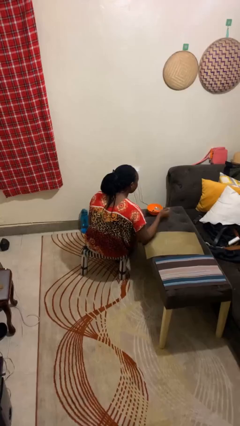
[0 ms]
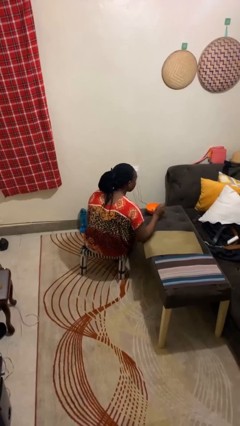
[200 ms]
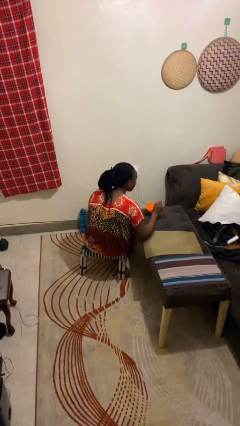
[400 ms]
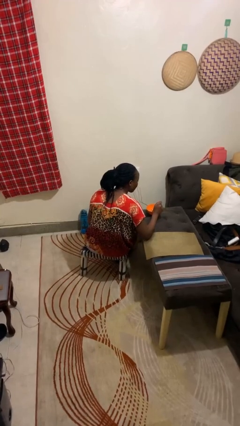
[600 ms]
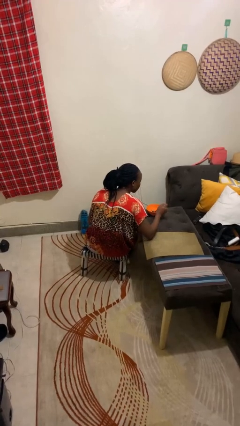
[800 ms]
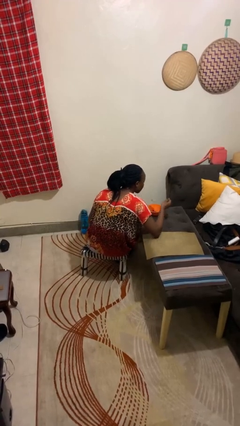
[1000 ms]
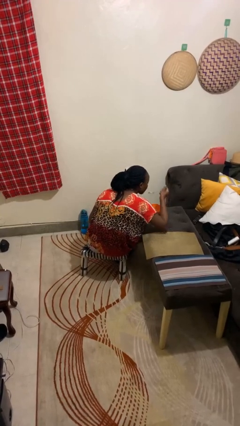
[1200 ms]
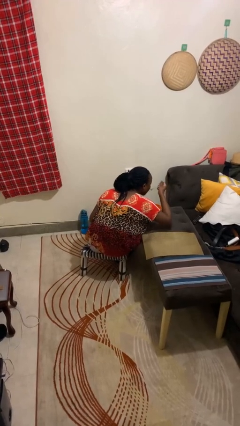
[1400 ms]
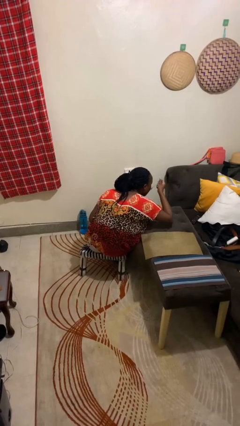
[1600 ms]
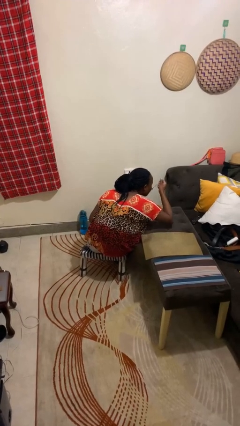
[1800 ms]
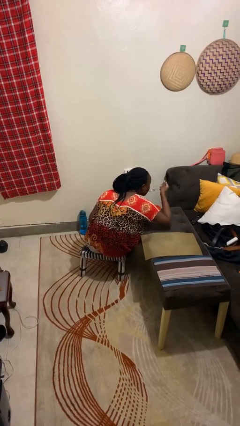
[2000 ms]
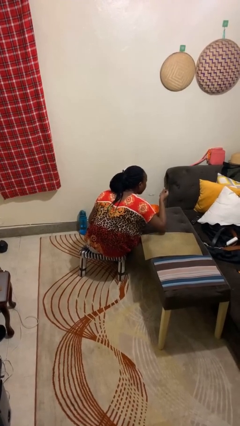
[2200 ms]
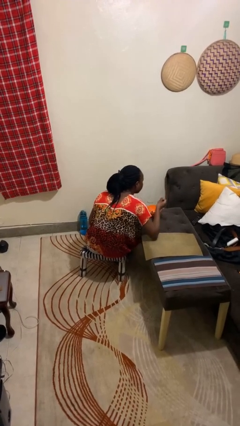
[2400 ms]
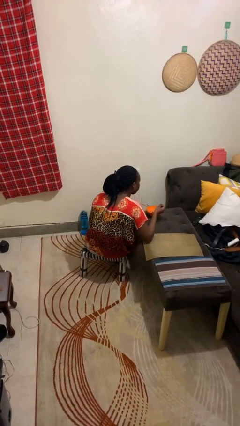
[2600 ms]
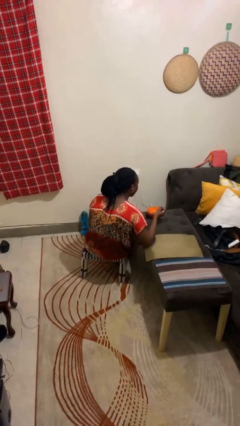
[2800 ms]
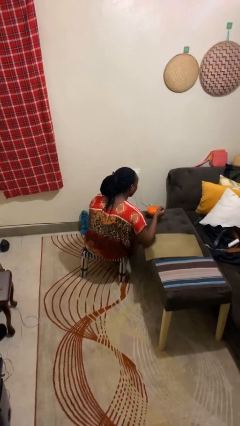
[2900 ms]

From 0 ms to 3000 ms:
person eats with utensil

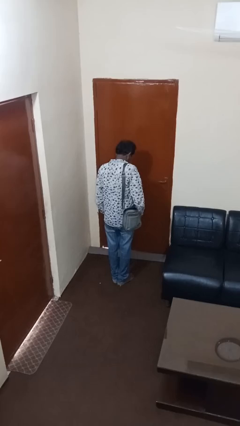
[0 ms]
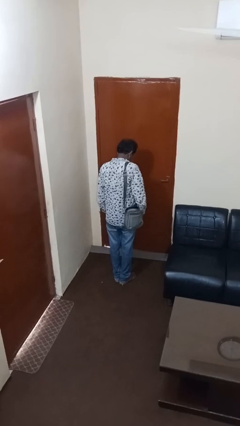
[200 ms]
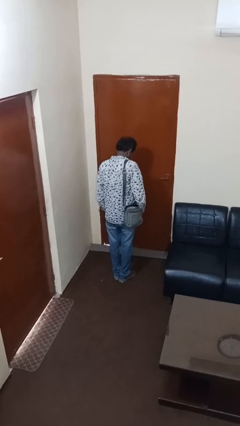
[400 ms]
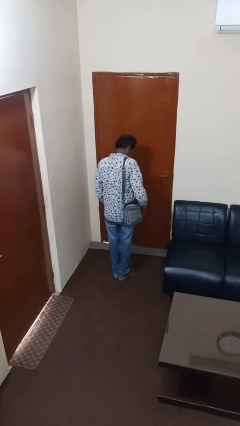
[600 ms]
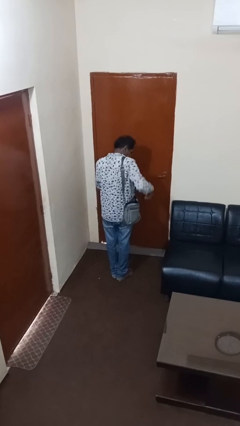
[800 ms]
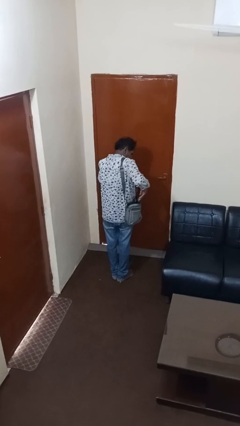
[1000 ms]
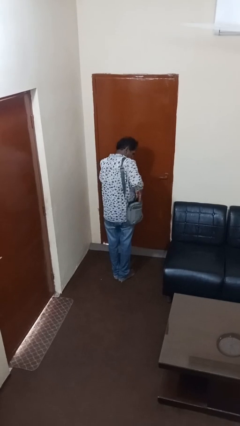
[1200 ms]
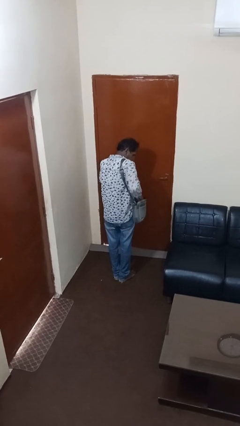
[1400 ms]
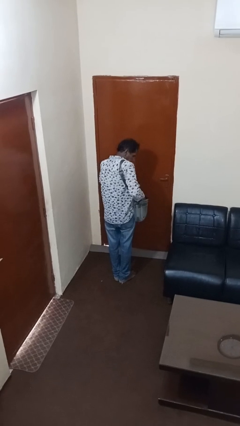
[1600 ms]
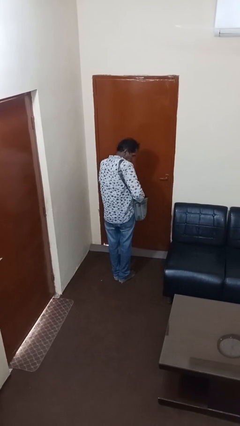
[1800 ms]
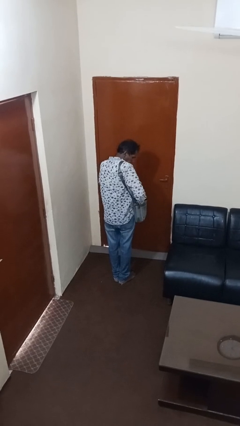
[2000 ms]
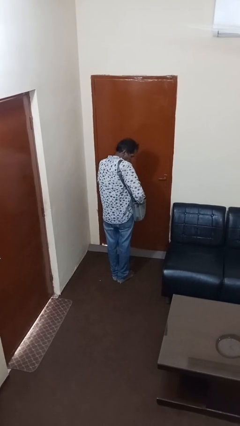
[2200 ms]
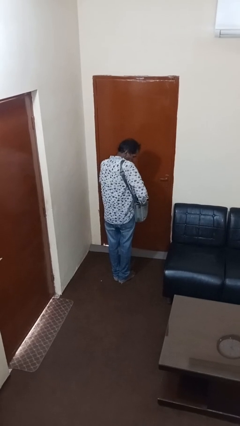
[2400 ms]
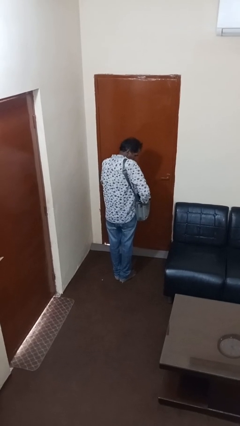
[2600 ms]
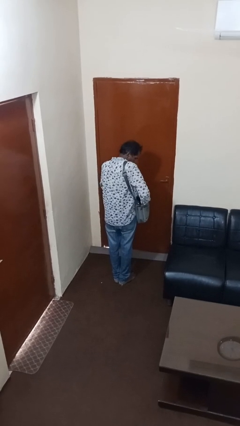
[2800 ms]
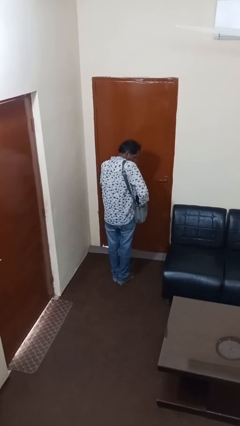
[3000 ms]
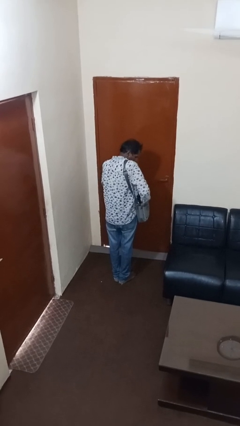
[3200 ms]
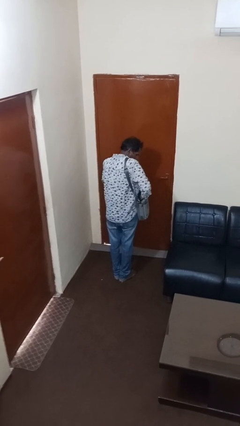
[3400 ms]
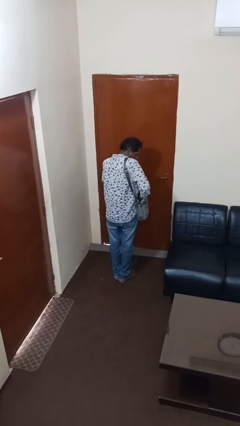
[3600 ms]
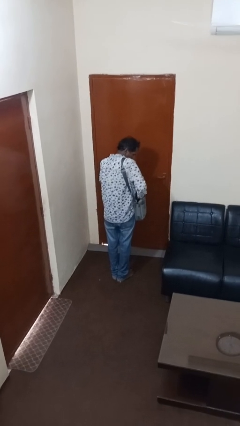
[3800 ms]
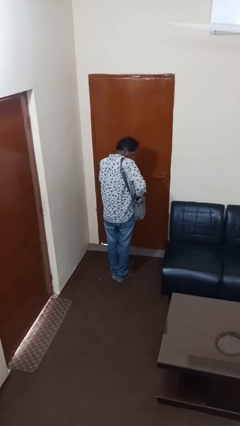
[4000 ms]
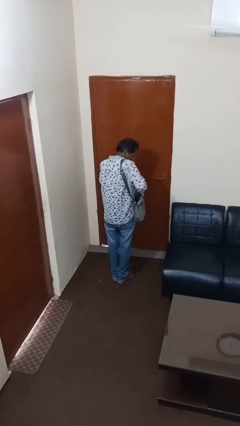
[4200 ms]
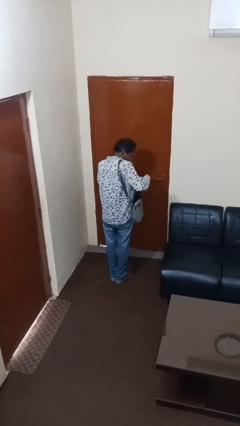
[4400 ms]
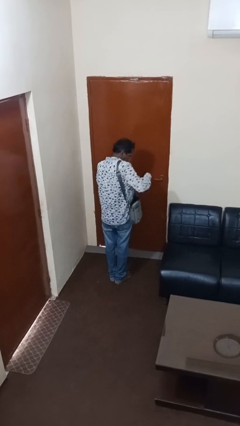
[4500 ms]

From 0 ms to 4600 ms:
person searches in purse

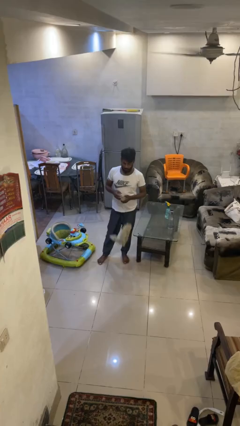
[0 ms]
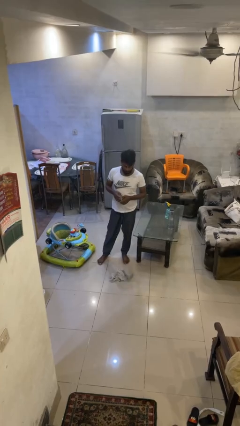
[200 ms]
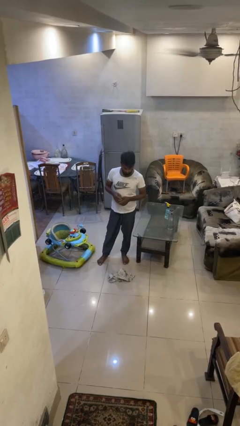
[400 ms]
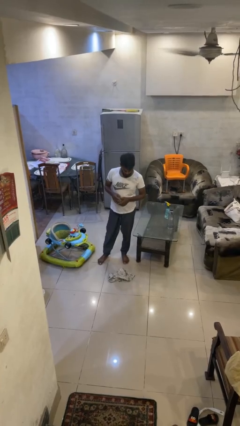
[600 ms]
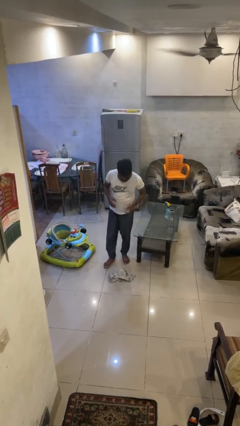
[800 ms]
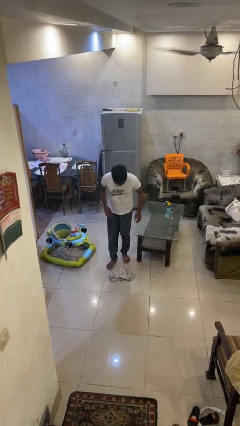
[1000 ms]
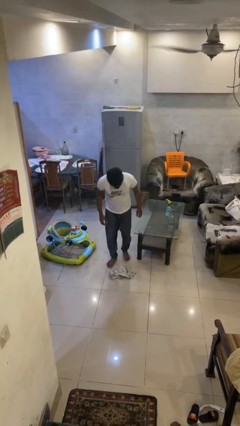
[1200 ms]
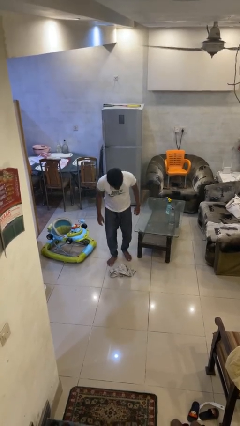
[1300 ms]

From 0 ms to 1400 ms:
person drops object

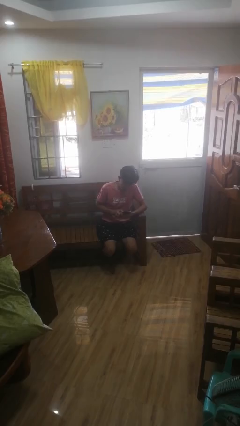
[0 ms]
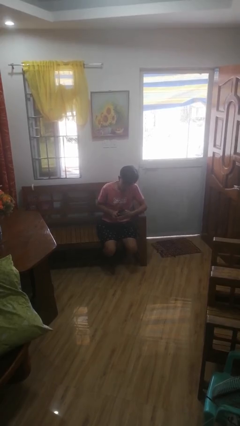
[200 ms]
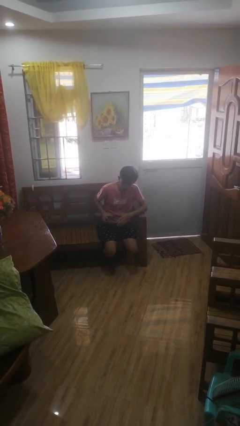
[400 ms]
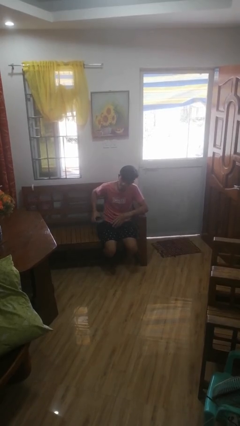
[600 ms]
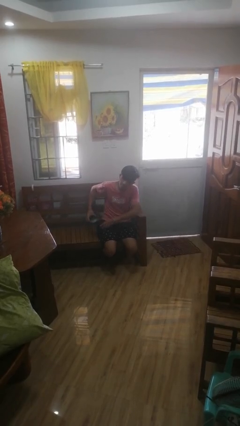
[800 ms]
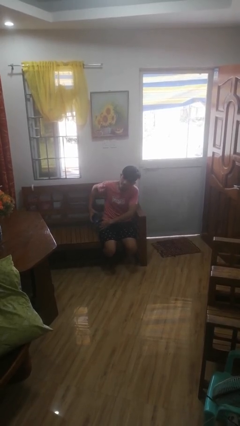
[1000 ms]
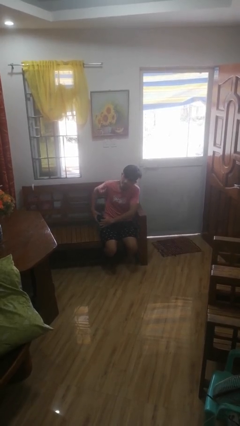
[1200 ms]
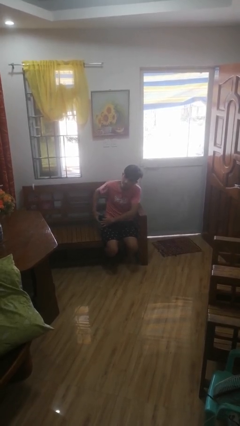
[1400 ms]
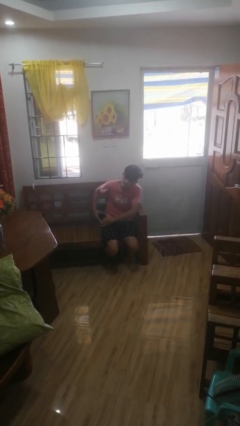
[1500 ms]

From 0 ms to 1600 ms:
person puts phone into pocket

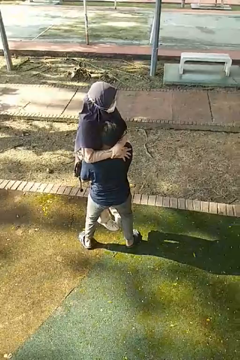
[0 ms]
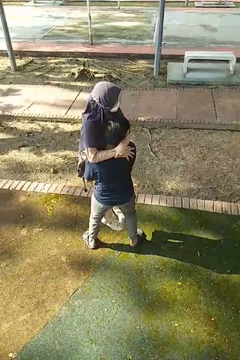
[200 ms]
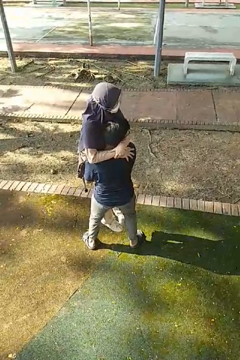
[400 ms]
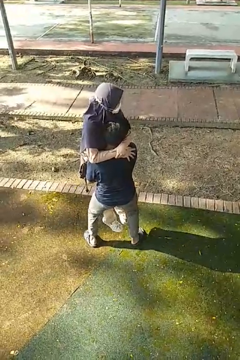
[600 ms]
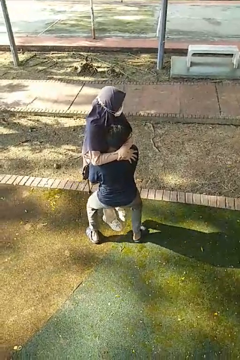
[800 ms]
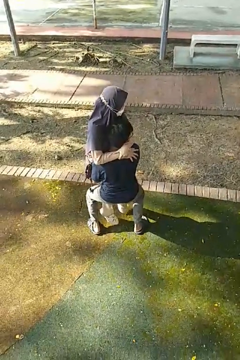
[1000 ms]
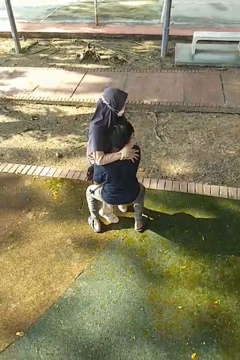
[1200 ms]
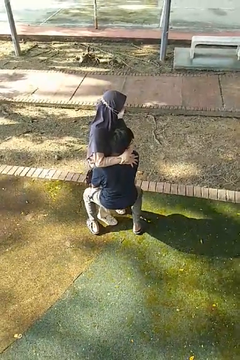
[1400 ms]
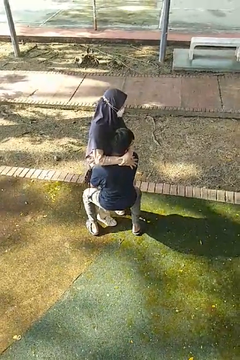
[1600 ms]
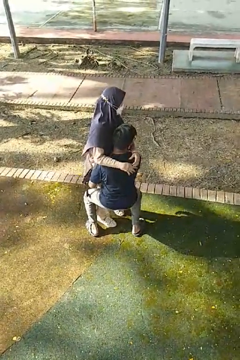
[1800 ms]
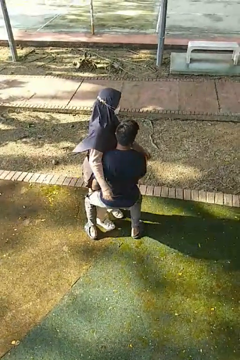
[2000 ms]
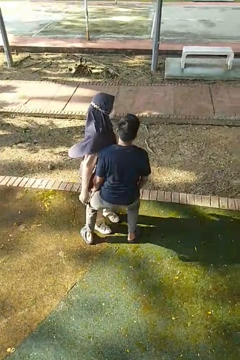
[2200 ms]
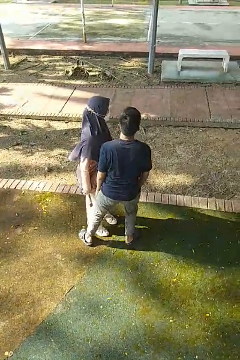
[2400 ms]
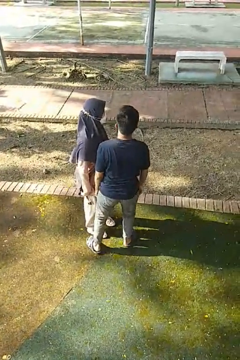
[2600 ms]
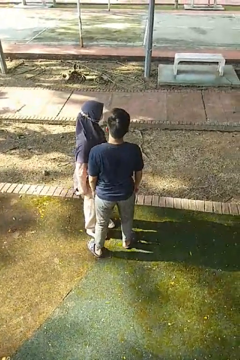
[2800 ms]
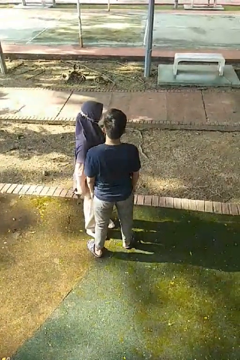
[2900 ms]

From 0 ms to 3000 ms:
person puts down person

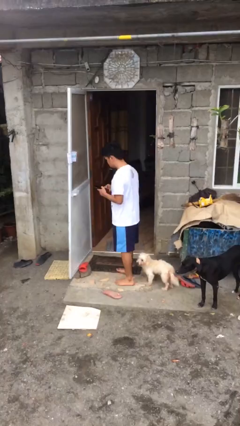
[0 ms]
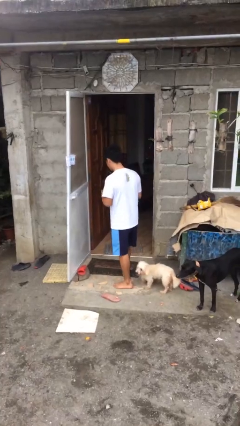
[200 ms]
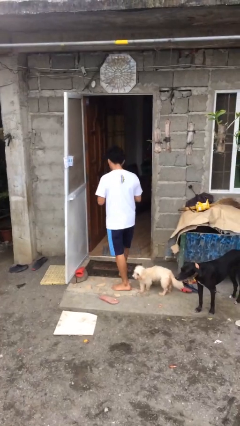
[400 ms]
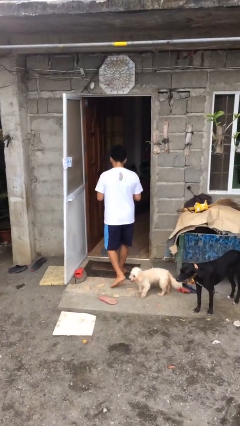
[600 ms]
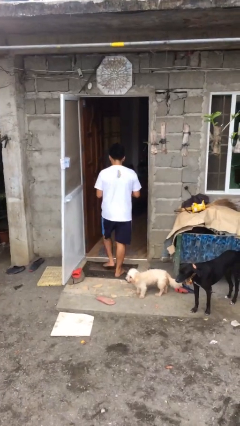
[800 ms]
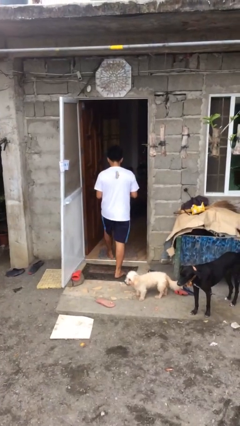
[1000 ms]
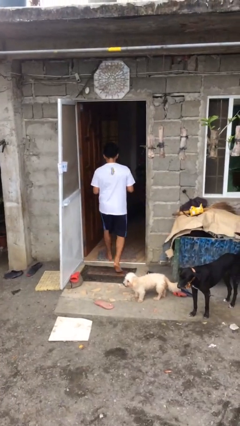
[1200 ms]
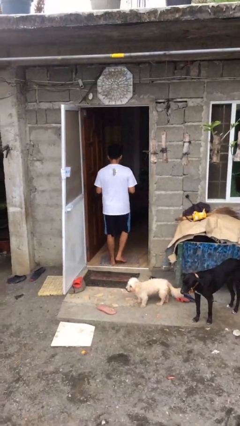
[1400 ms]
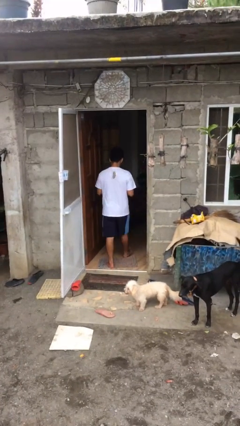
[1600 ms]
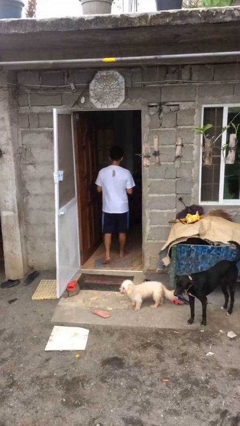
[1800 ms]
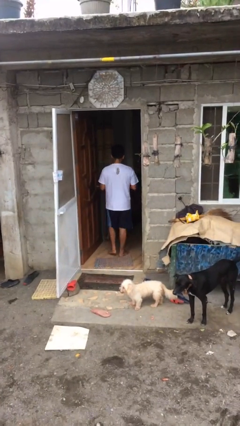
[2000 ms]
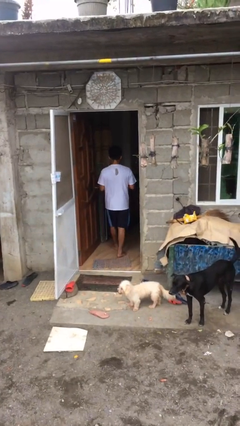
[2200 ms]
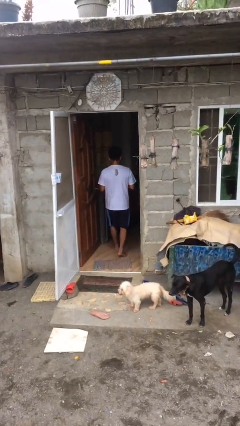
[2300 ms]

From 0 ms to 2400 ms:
person exits scene through structure

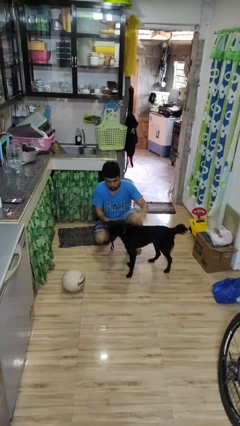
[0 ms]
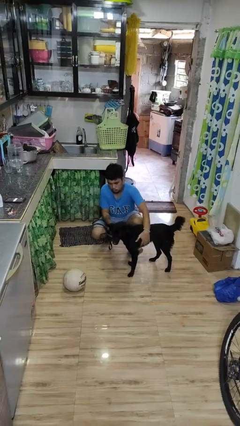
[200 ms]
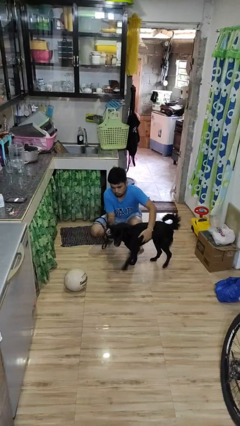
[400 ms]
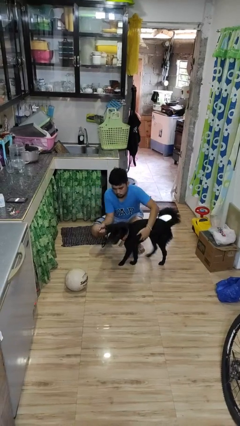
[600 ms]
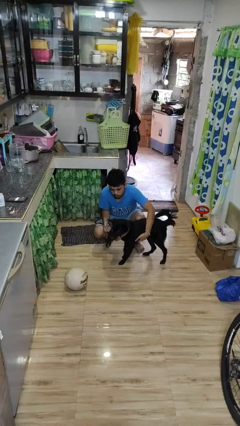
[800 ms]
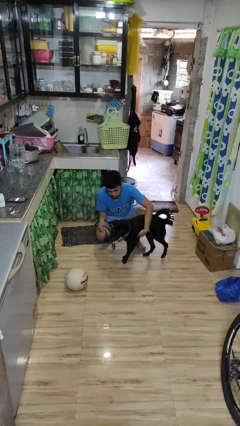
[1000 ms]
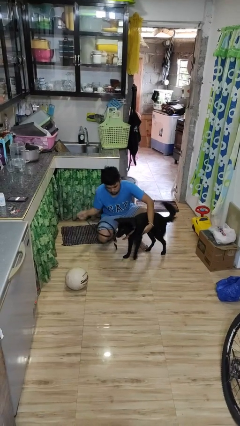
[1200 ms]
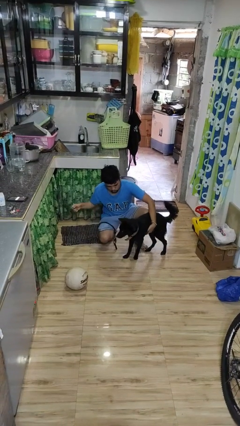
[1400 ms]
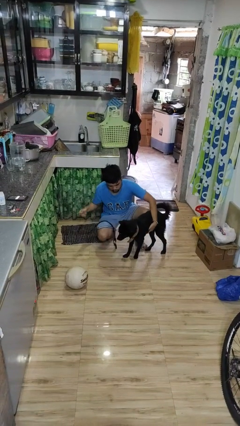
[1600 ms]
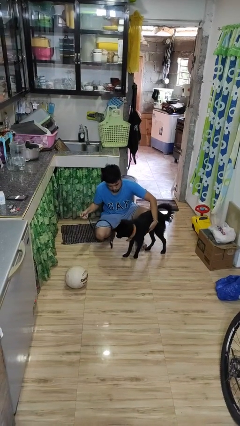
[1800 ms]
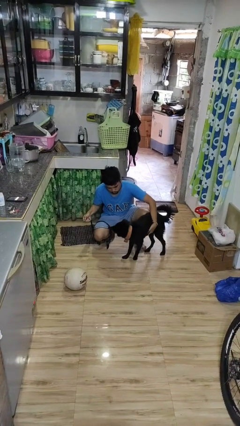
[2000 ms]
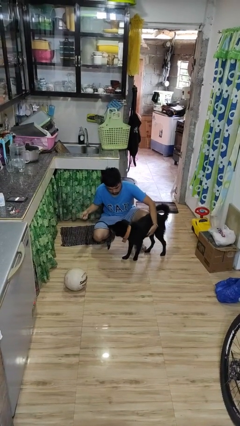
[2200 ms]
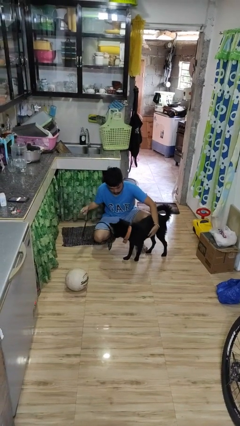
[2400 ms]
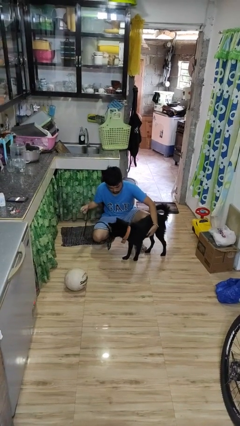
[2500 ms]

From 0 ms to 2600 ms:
person unattaches leash from dog
